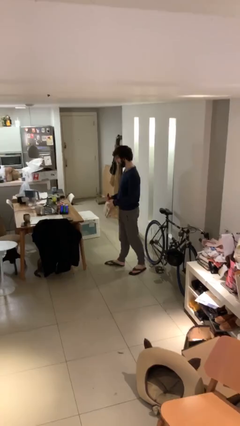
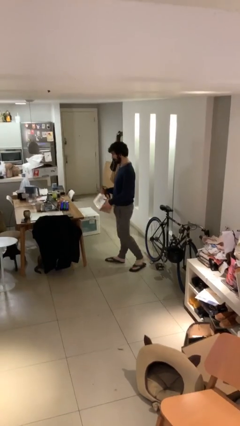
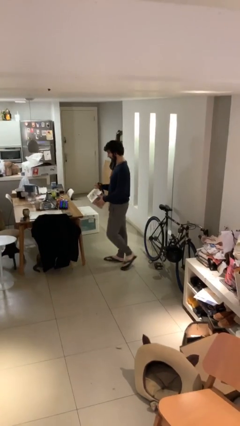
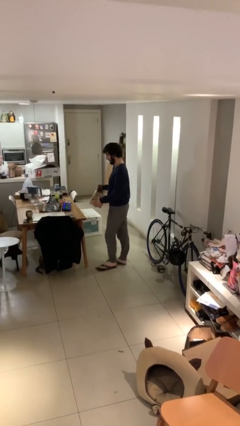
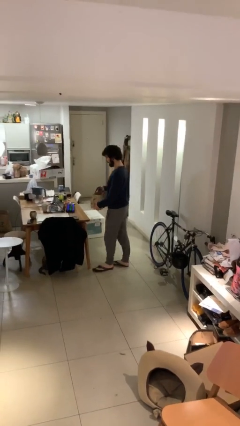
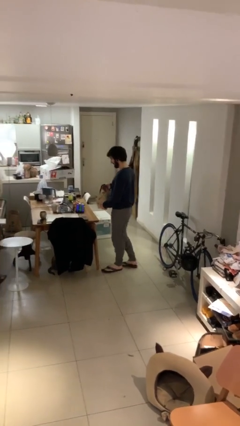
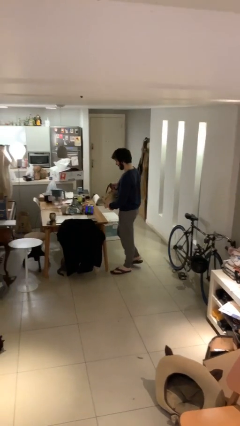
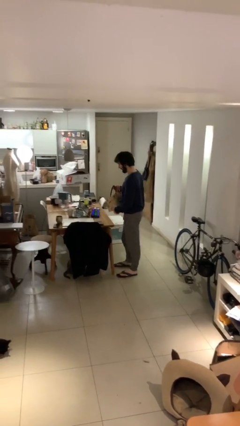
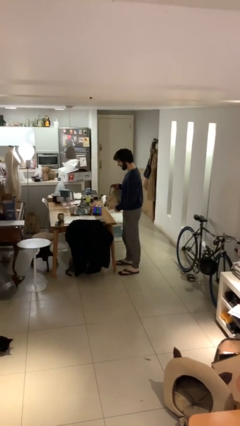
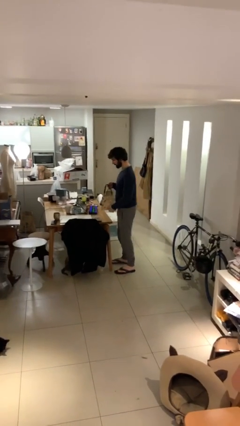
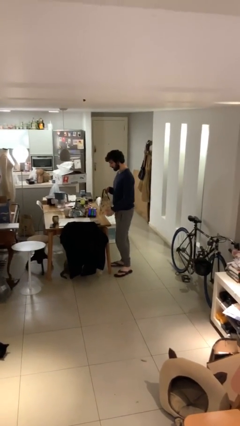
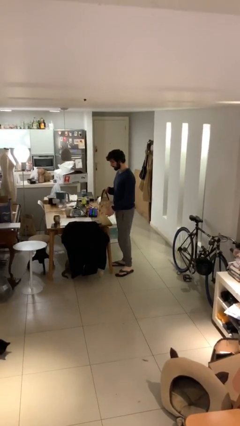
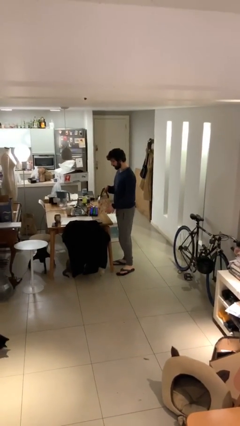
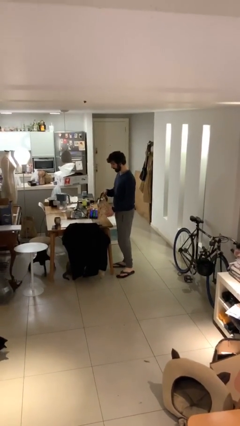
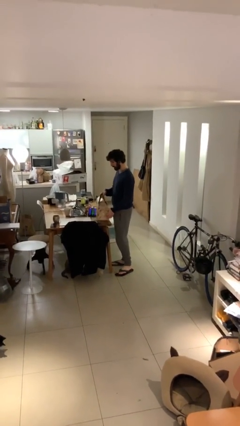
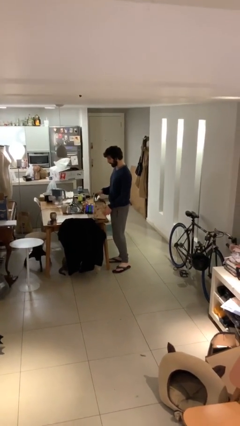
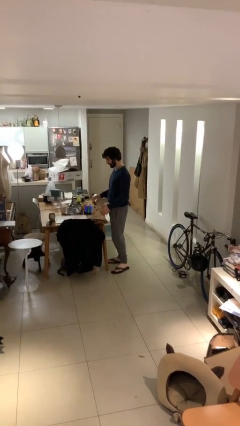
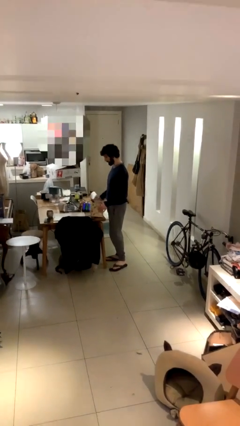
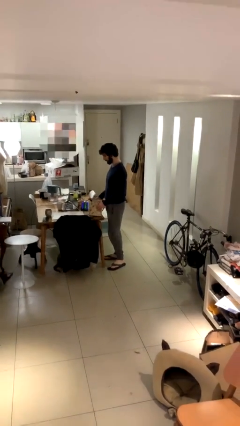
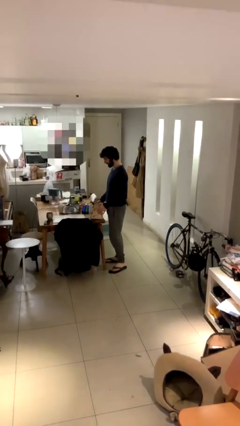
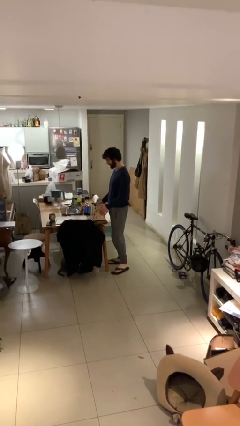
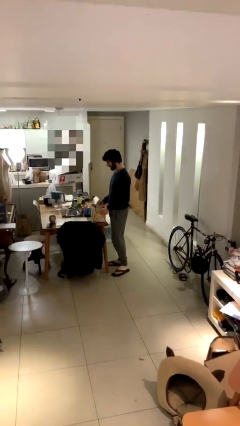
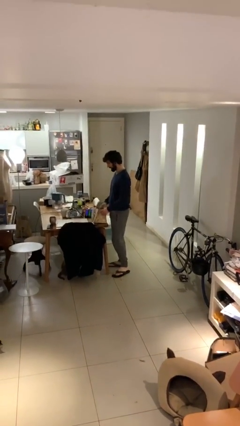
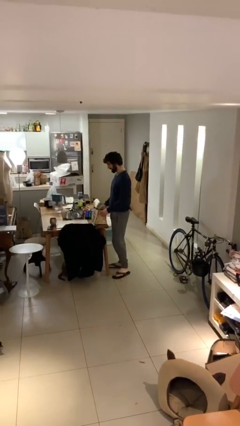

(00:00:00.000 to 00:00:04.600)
person puts down object on table

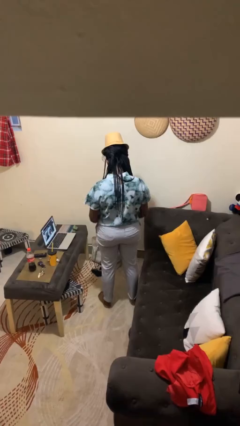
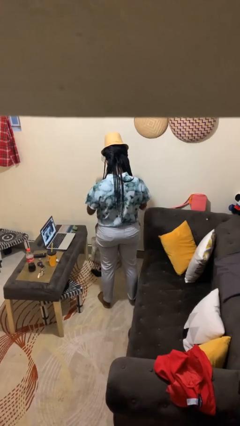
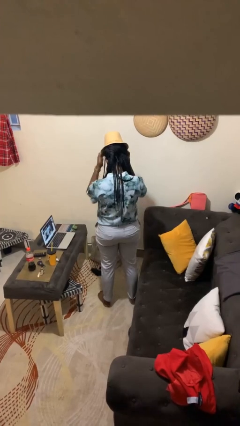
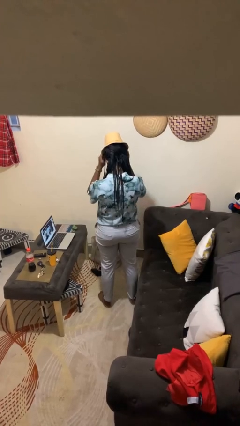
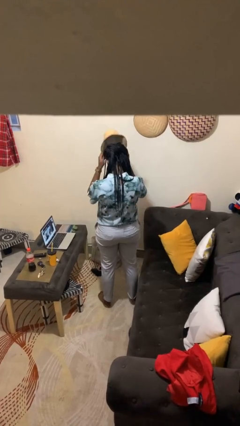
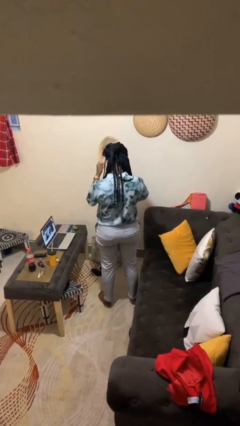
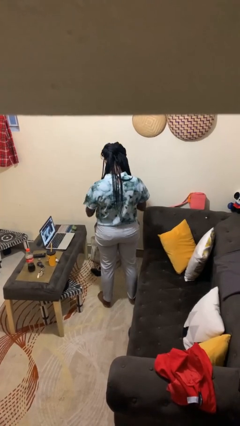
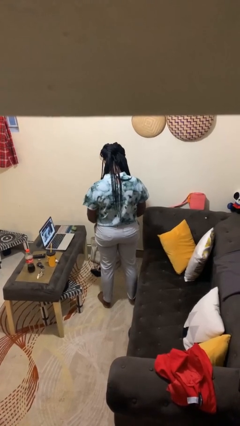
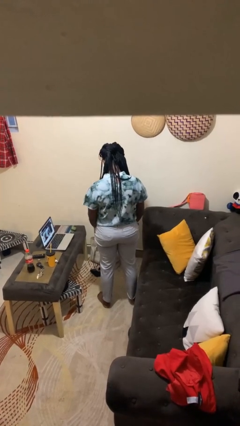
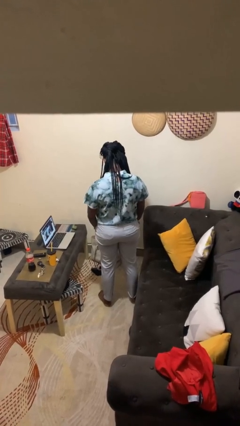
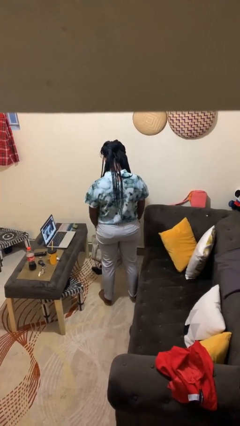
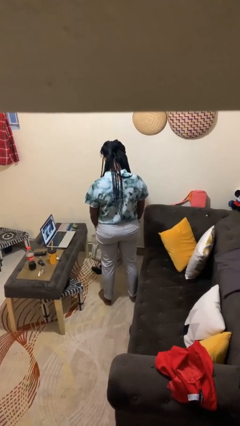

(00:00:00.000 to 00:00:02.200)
person takes off hat

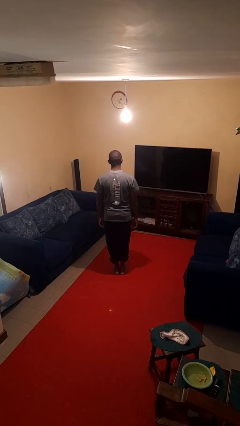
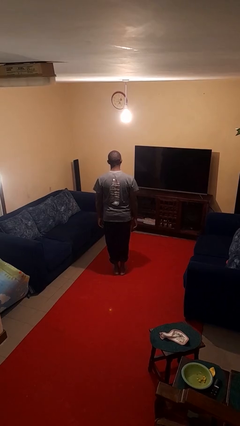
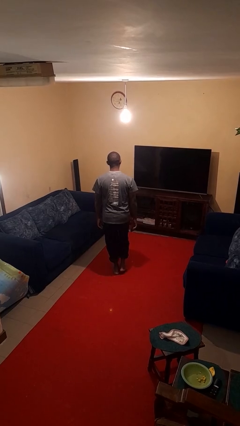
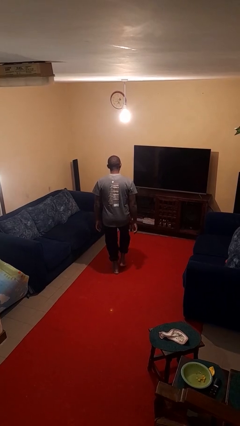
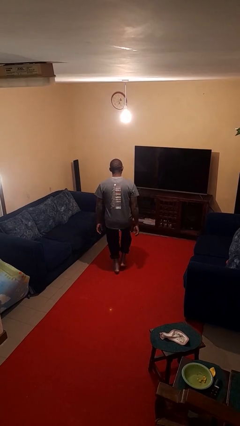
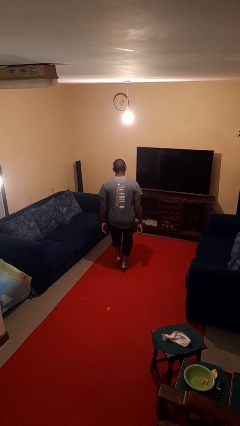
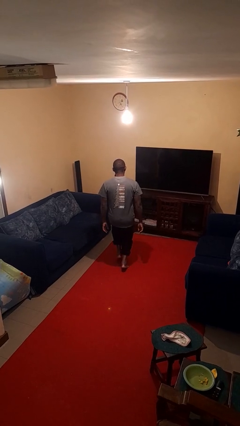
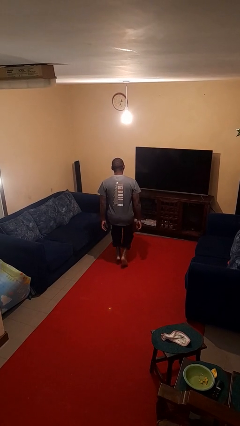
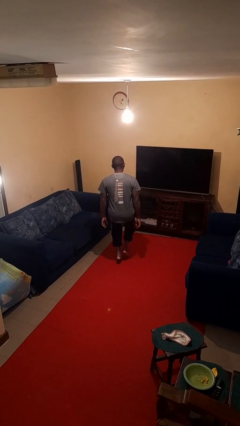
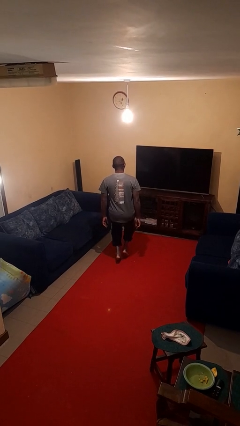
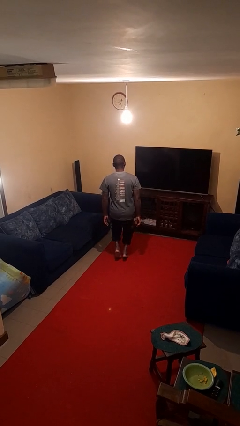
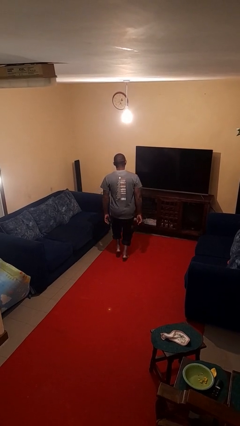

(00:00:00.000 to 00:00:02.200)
person walks tiptoe

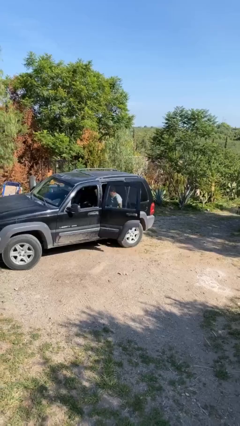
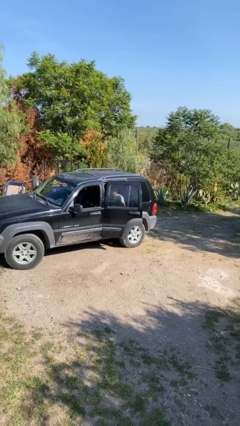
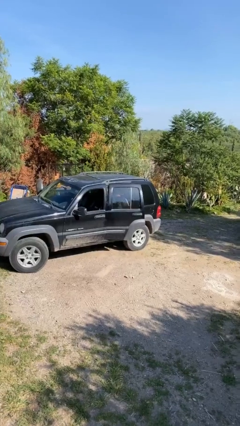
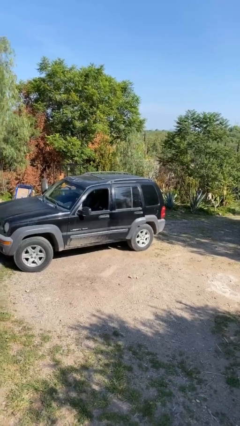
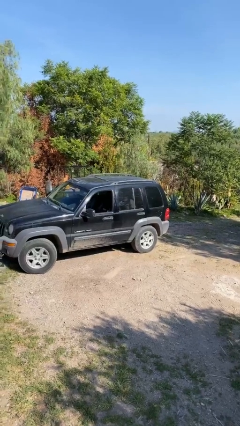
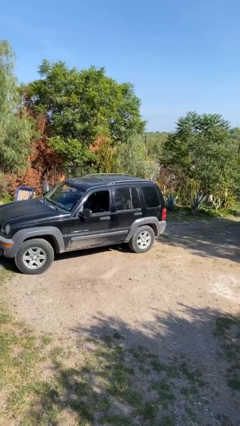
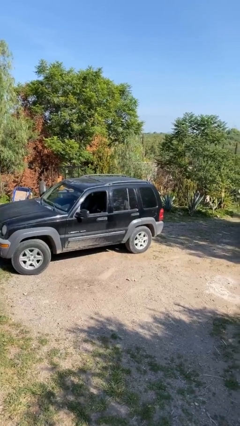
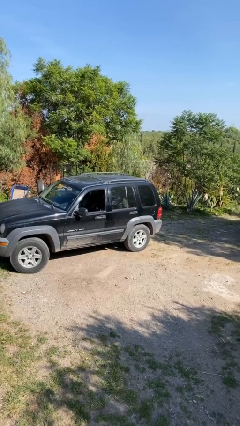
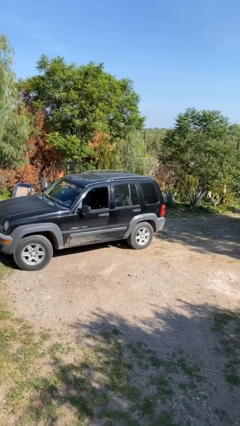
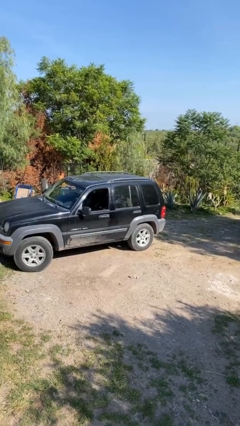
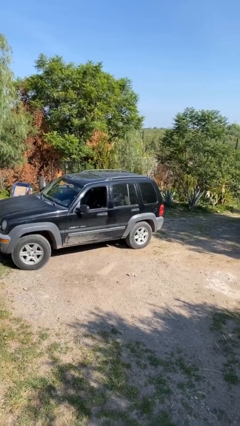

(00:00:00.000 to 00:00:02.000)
person closes car door

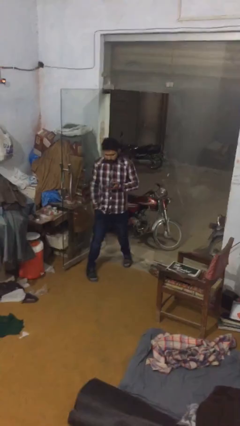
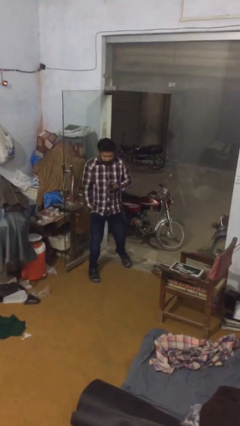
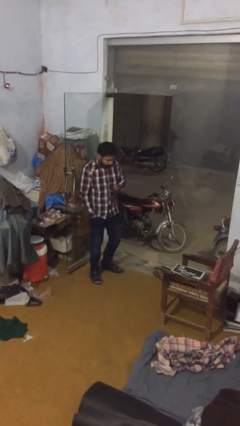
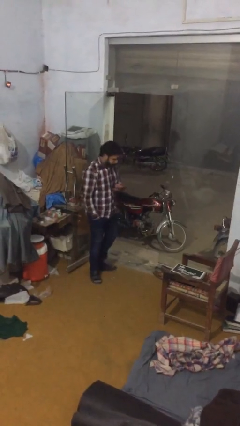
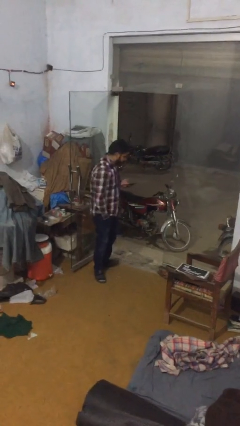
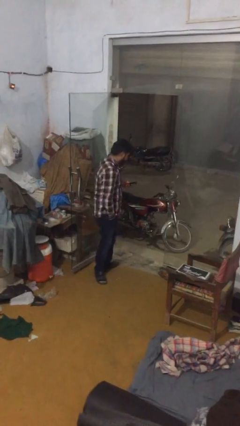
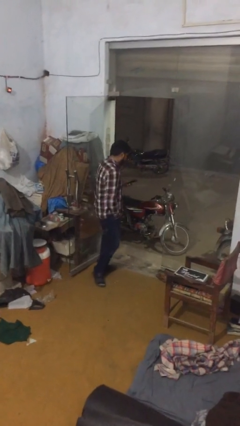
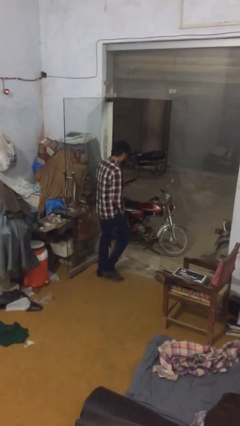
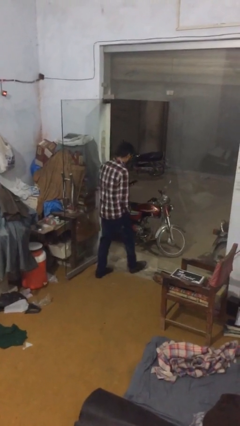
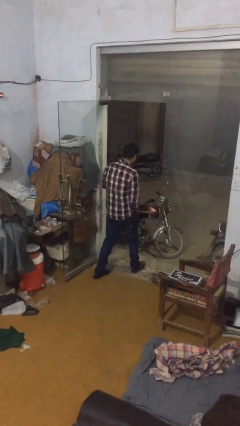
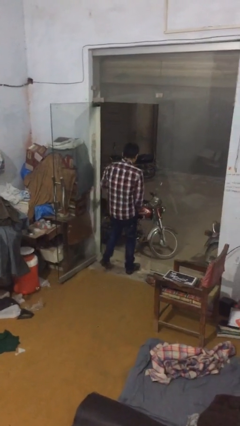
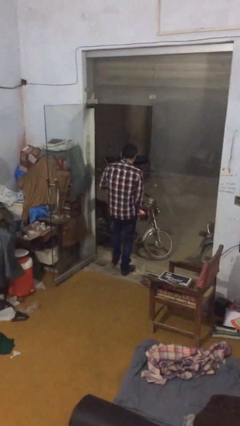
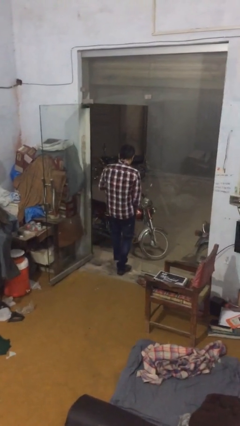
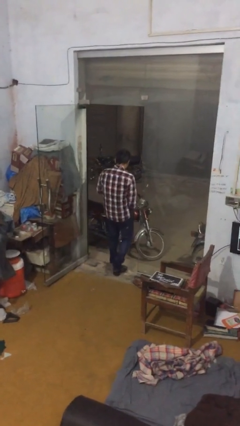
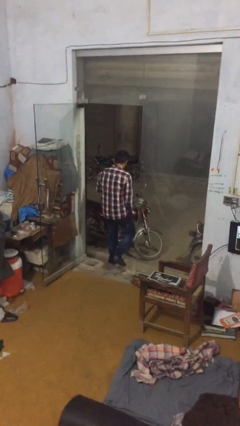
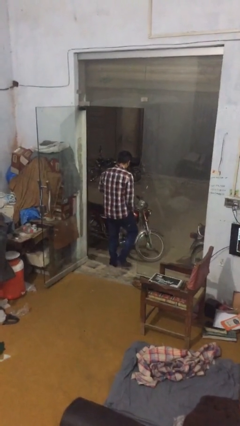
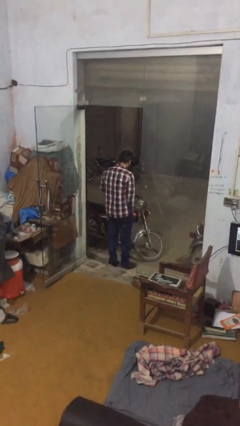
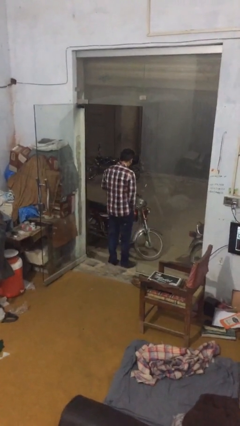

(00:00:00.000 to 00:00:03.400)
person exits scene through structure

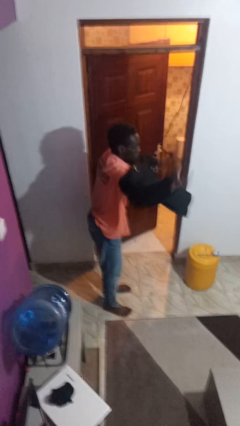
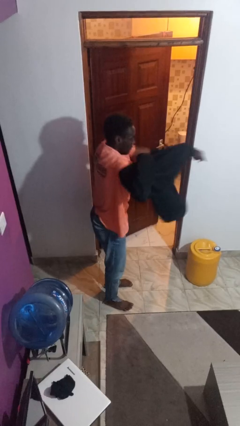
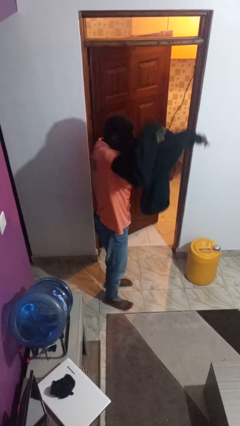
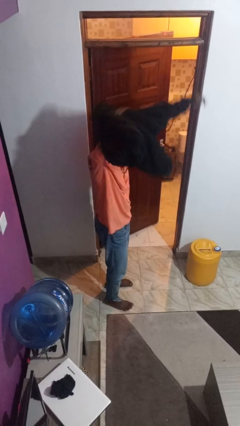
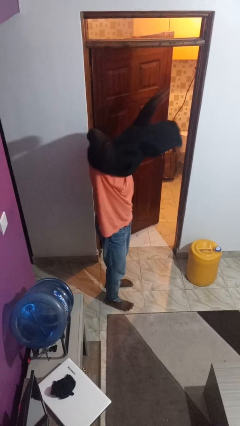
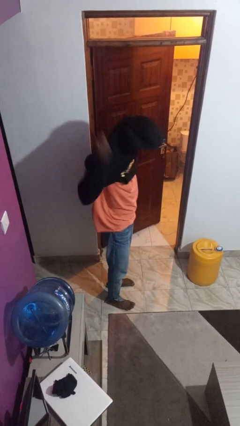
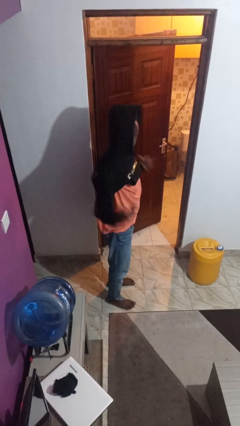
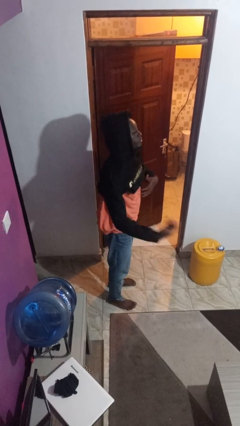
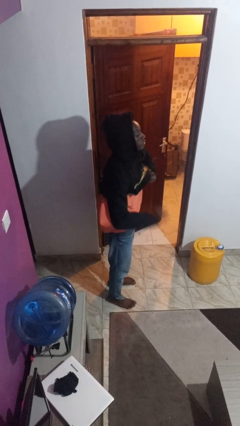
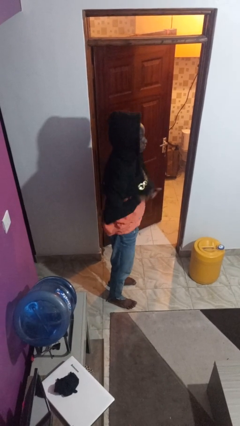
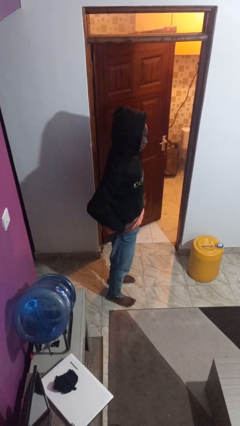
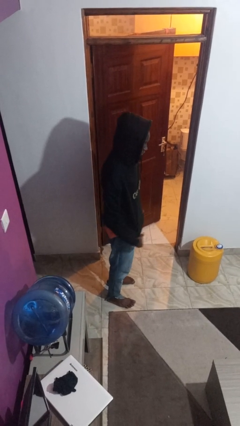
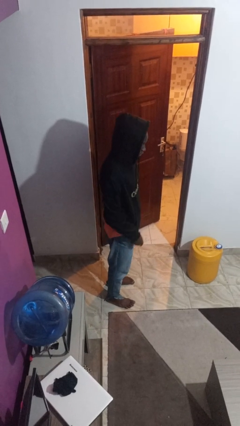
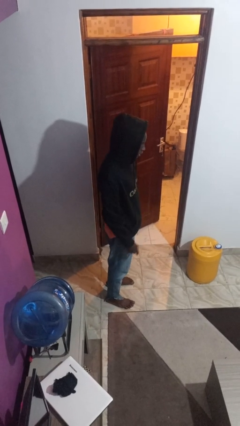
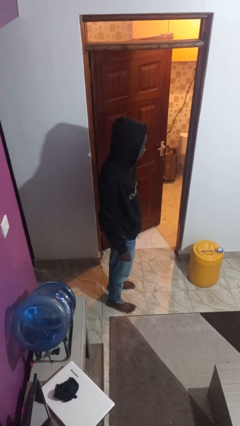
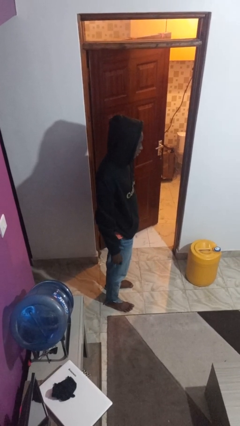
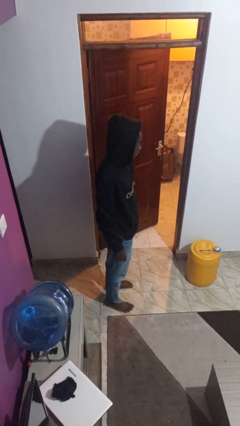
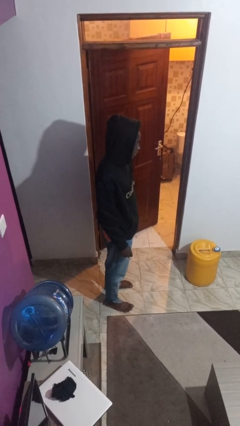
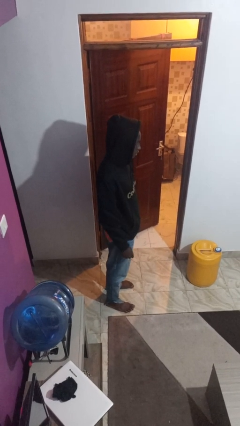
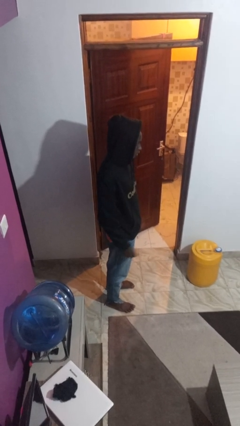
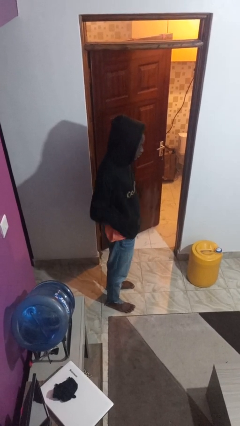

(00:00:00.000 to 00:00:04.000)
person puts on hoodie
